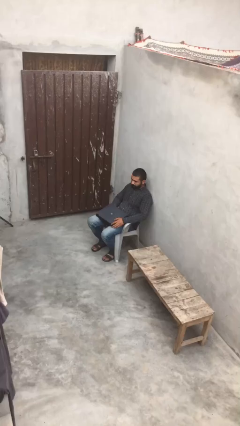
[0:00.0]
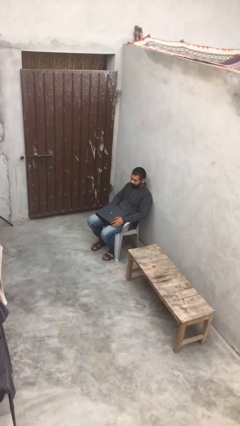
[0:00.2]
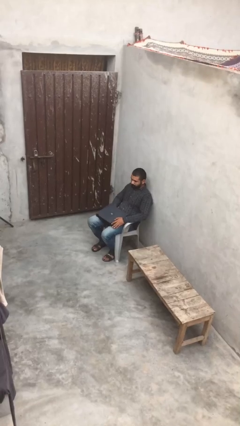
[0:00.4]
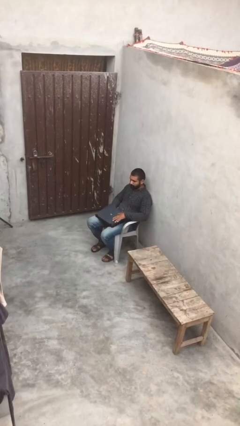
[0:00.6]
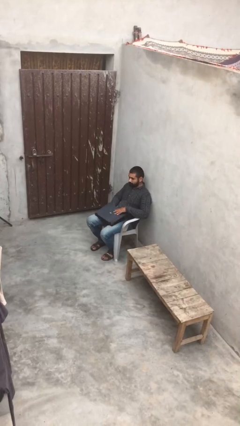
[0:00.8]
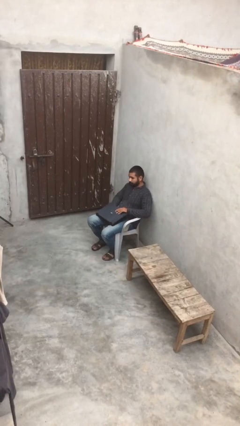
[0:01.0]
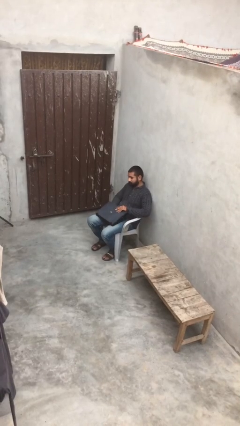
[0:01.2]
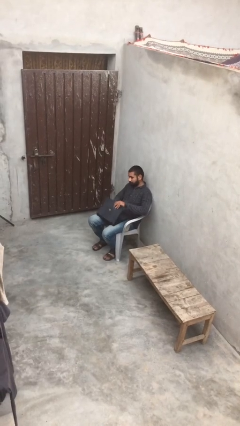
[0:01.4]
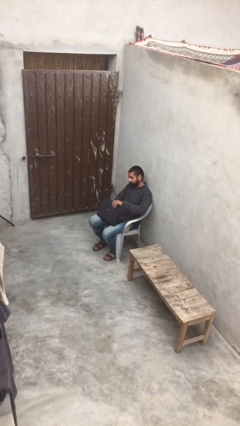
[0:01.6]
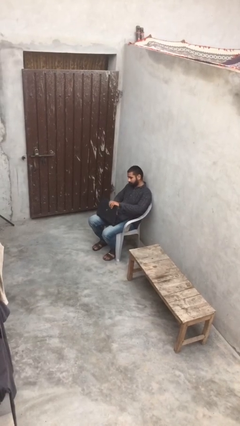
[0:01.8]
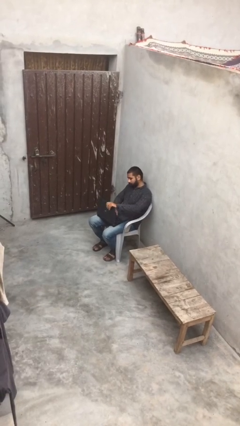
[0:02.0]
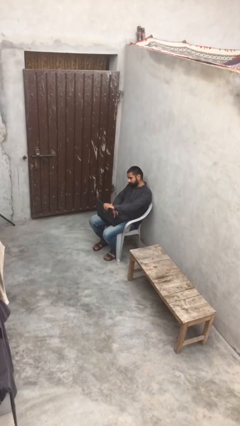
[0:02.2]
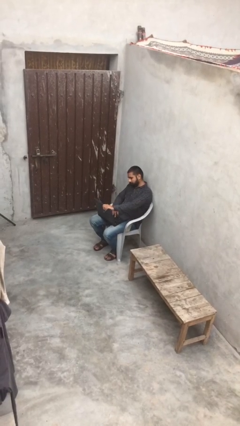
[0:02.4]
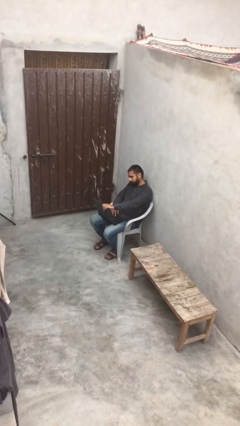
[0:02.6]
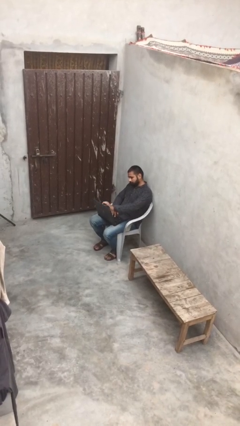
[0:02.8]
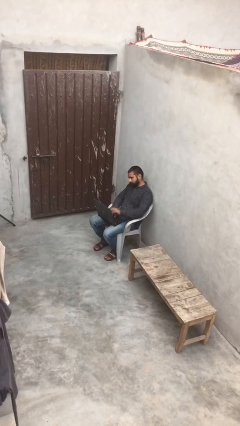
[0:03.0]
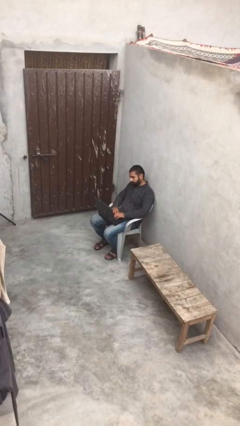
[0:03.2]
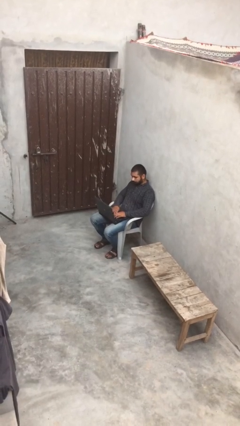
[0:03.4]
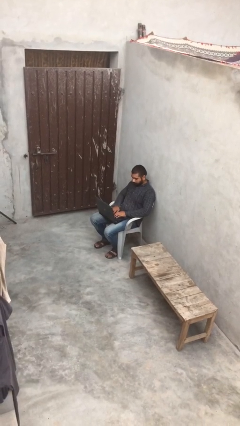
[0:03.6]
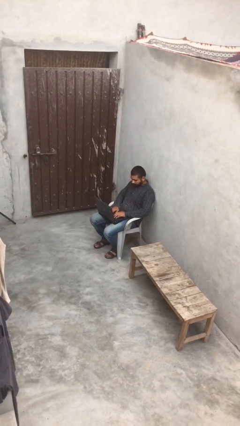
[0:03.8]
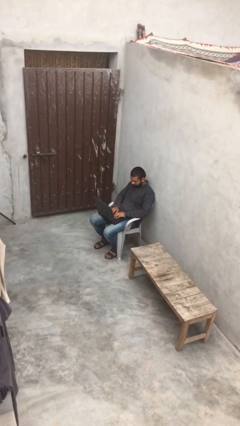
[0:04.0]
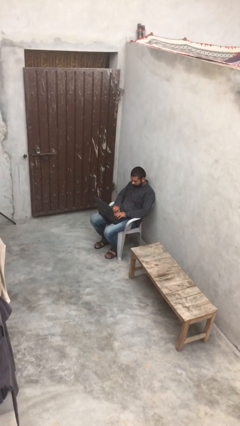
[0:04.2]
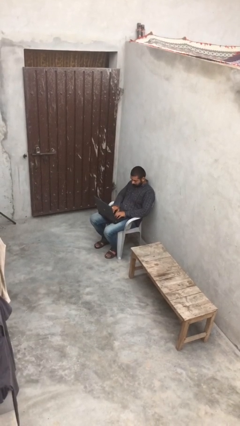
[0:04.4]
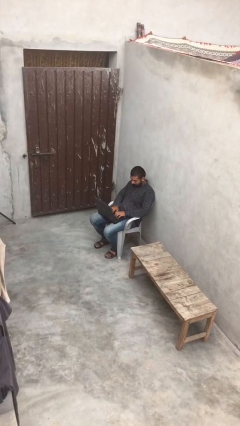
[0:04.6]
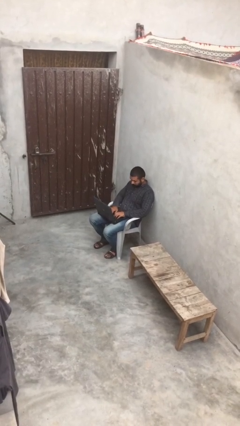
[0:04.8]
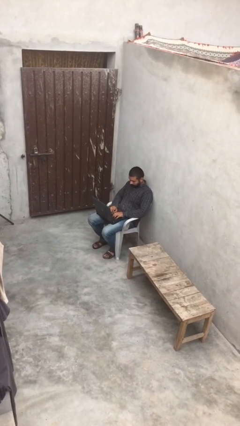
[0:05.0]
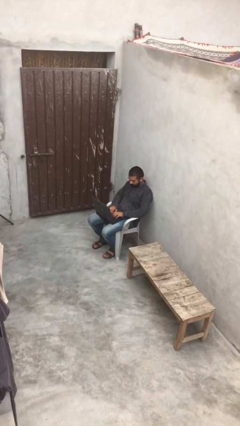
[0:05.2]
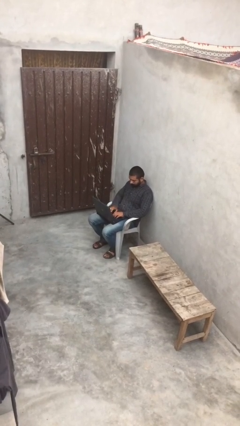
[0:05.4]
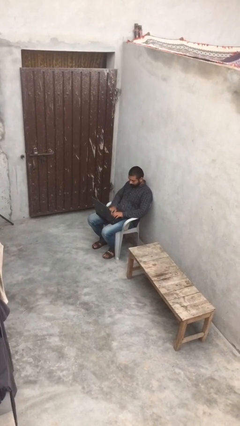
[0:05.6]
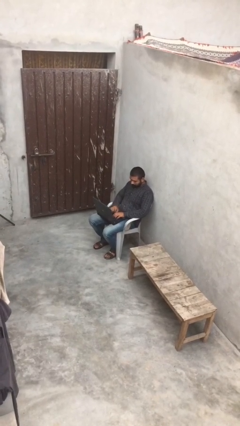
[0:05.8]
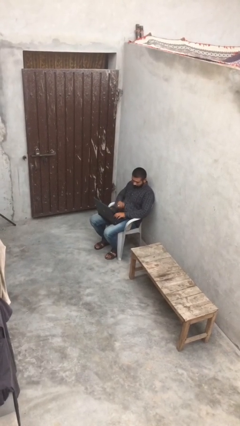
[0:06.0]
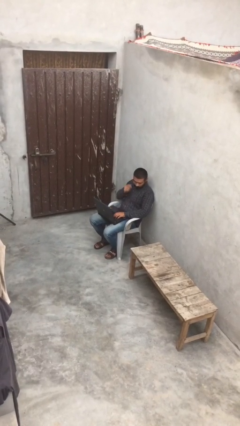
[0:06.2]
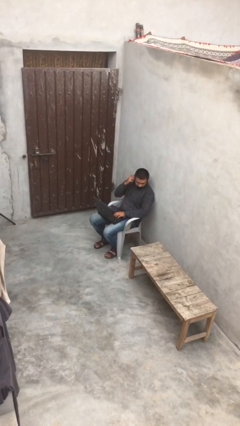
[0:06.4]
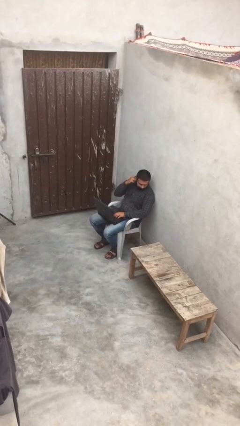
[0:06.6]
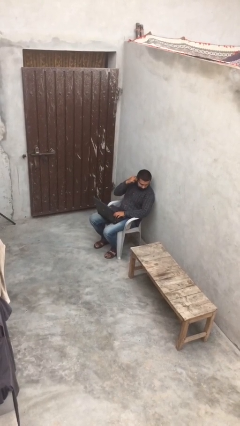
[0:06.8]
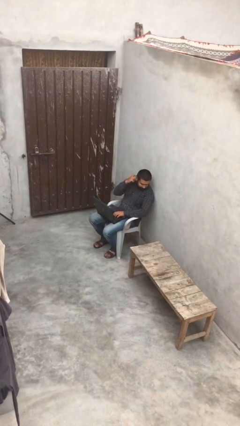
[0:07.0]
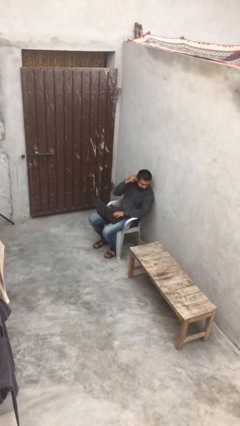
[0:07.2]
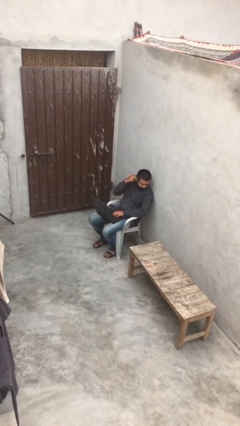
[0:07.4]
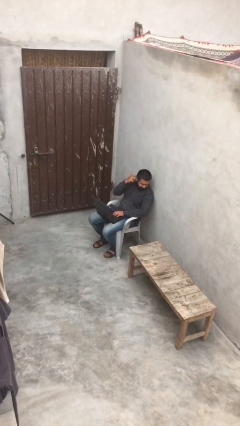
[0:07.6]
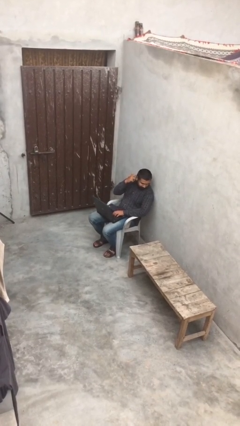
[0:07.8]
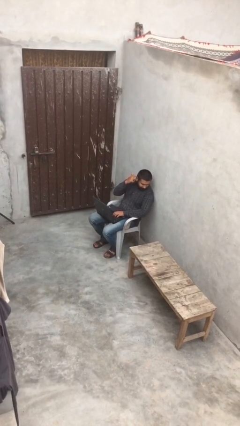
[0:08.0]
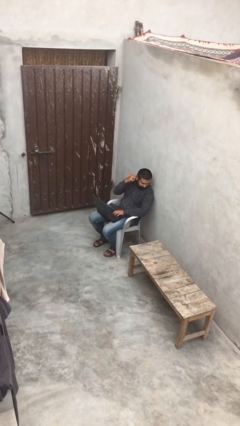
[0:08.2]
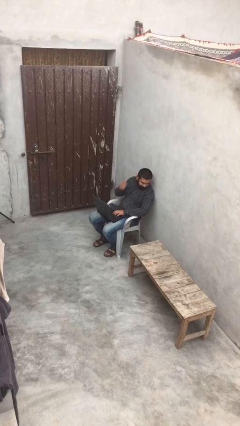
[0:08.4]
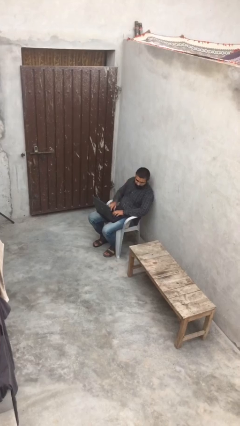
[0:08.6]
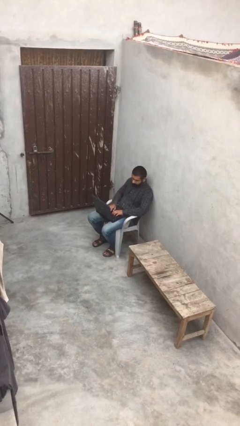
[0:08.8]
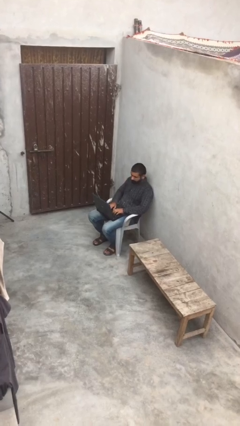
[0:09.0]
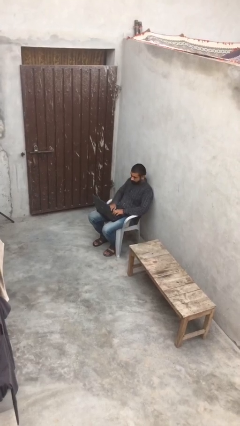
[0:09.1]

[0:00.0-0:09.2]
person interacts with laptop

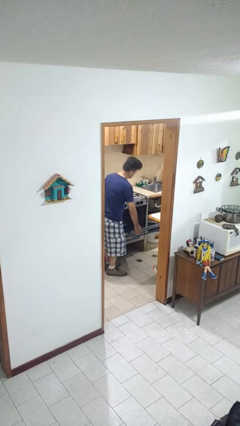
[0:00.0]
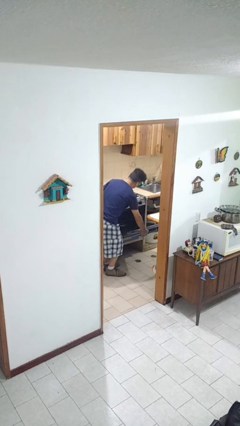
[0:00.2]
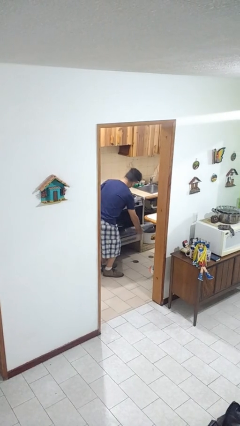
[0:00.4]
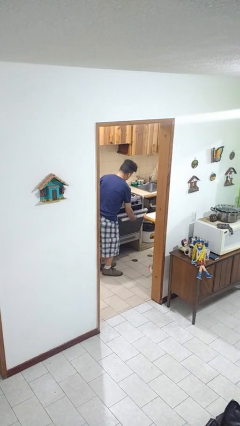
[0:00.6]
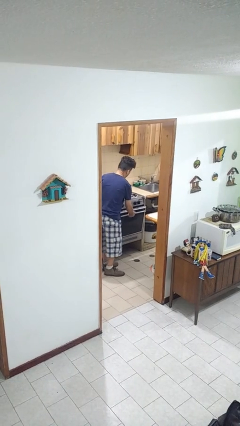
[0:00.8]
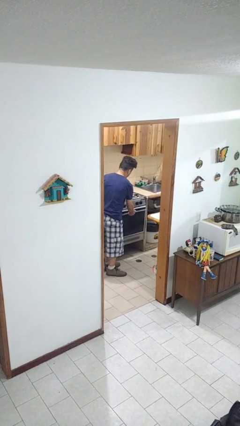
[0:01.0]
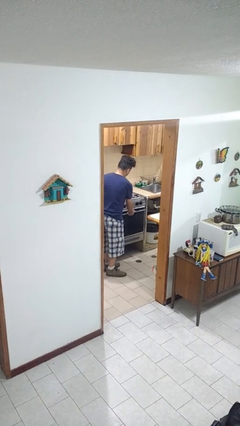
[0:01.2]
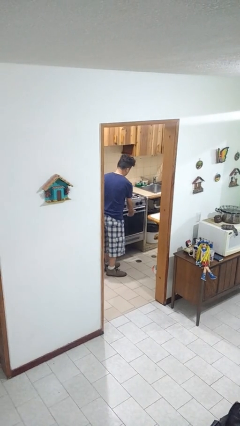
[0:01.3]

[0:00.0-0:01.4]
person closes oven door

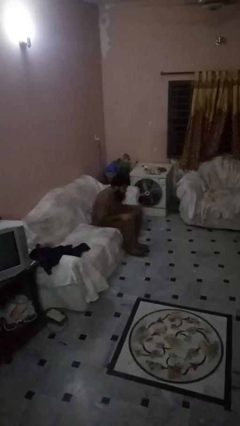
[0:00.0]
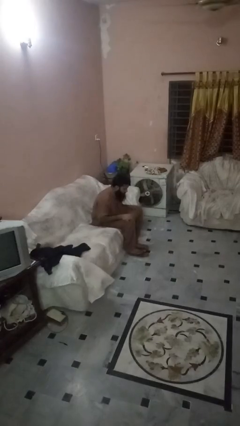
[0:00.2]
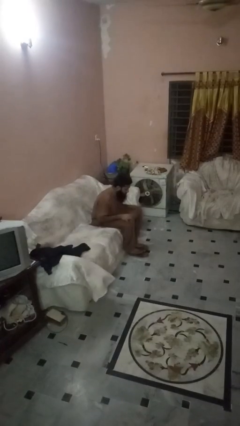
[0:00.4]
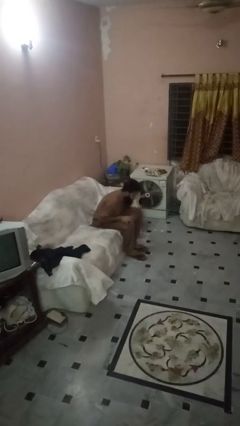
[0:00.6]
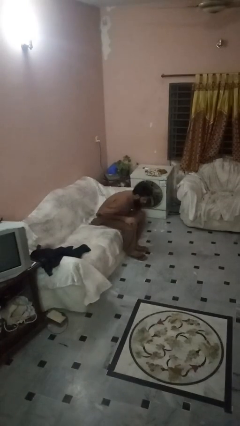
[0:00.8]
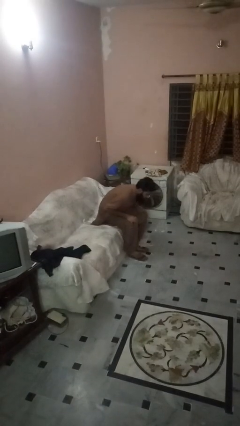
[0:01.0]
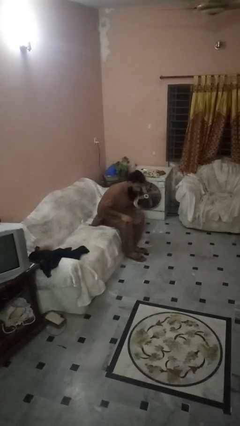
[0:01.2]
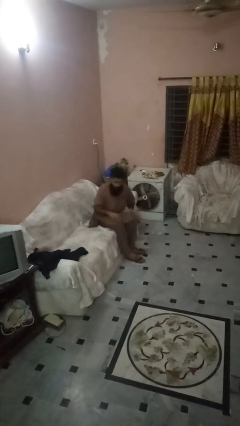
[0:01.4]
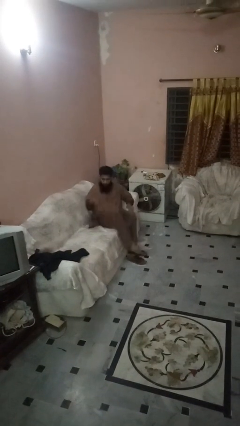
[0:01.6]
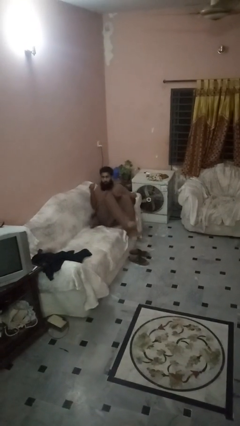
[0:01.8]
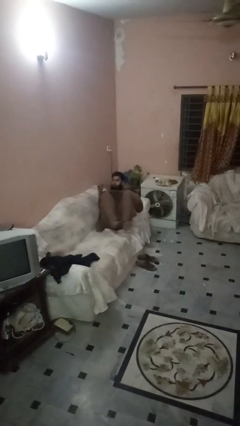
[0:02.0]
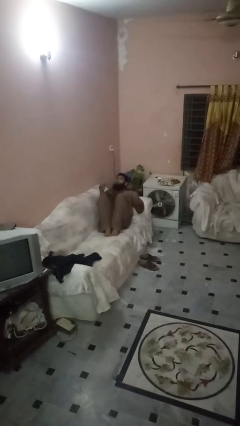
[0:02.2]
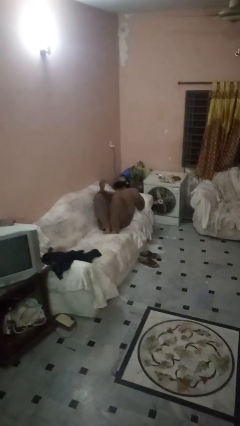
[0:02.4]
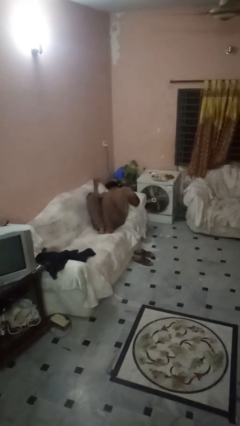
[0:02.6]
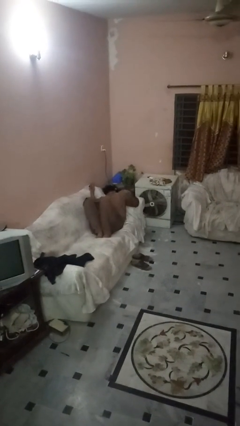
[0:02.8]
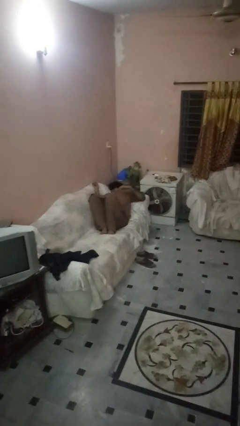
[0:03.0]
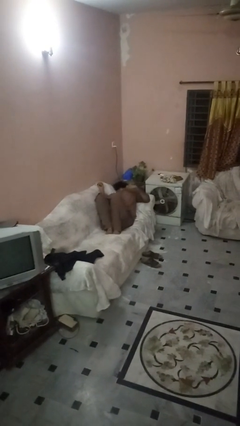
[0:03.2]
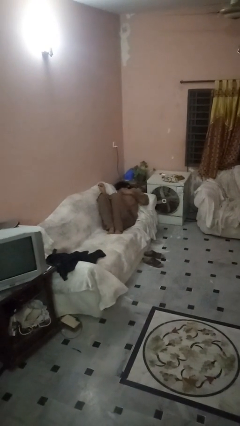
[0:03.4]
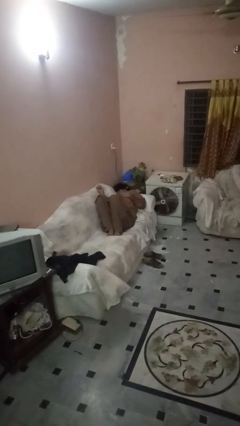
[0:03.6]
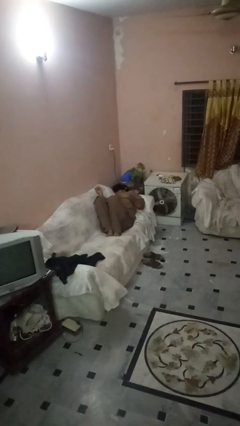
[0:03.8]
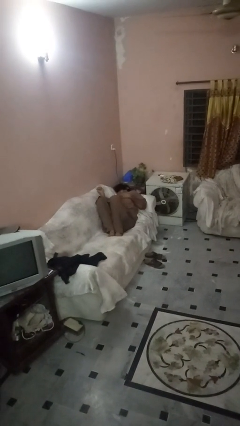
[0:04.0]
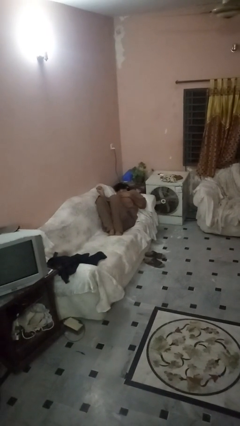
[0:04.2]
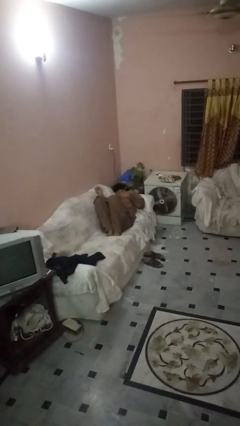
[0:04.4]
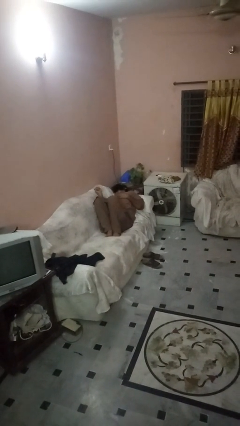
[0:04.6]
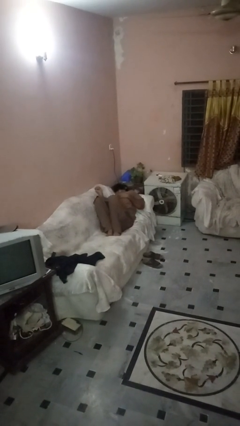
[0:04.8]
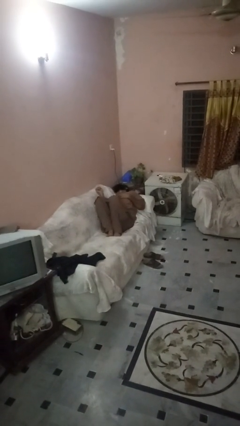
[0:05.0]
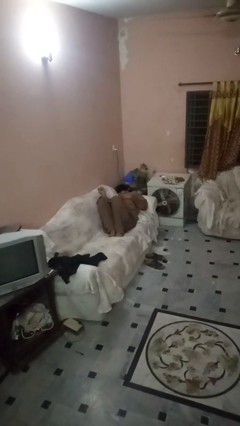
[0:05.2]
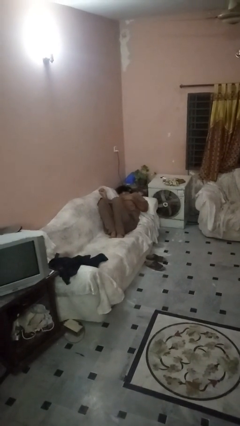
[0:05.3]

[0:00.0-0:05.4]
person lies down on couch

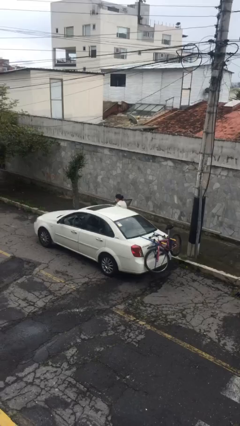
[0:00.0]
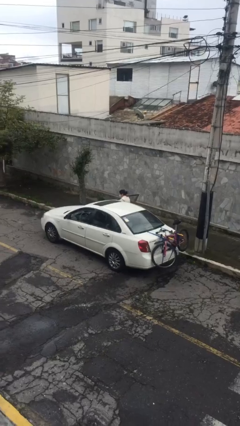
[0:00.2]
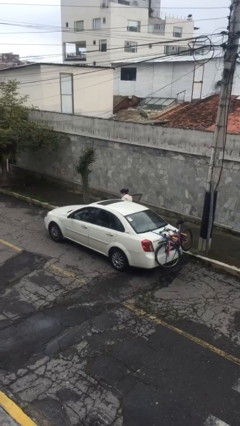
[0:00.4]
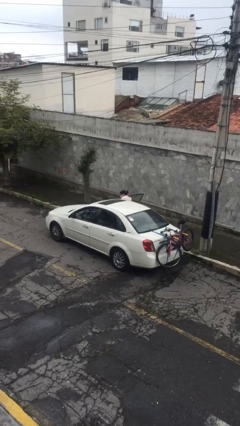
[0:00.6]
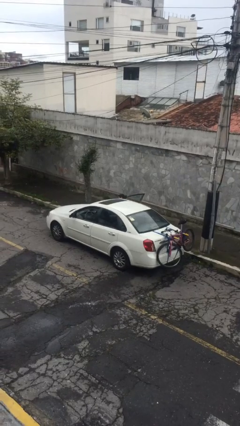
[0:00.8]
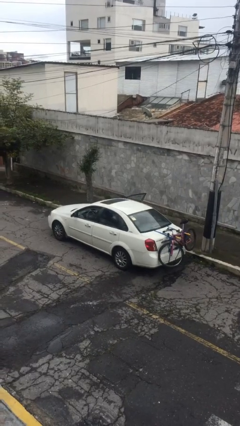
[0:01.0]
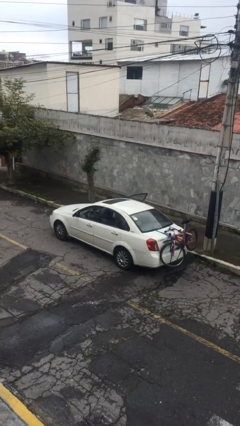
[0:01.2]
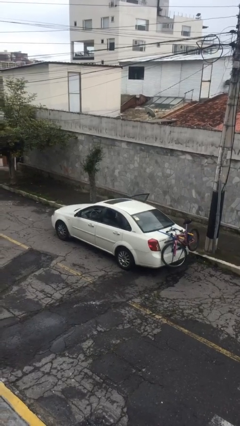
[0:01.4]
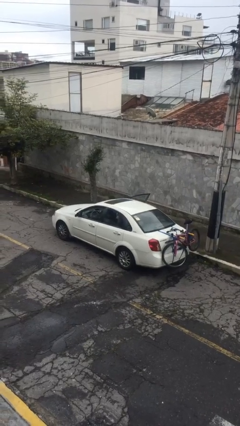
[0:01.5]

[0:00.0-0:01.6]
person enters car

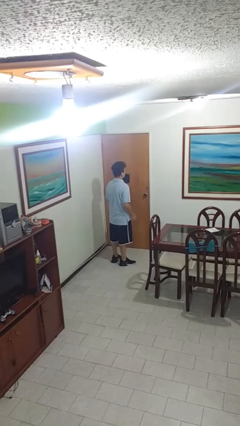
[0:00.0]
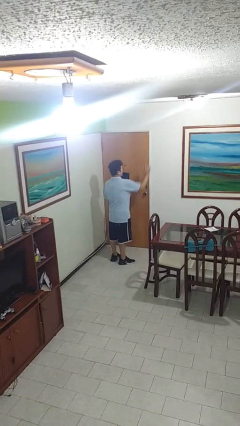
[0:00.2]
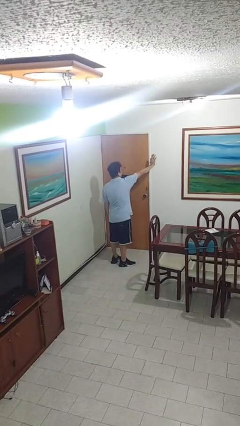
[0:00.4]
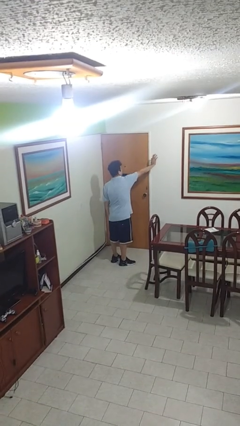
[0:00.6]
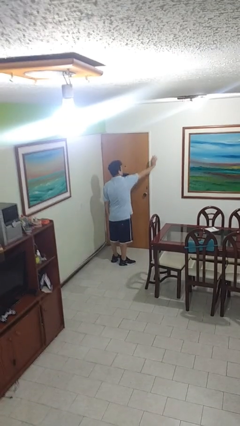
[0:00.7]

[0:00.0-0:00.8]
person gestures stop
